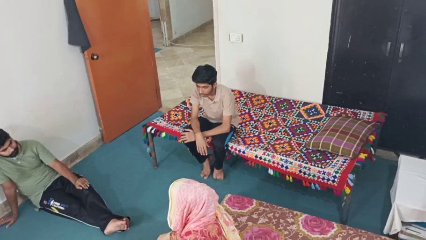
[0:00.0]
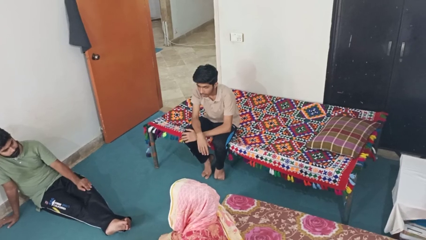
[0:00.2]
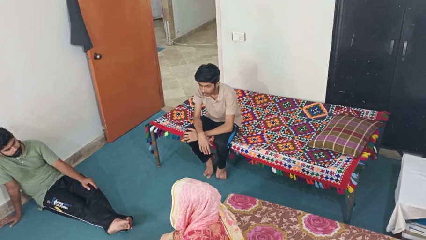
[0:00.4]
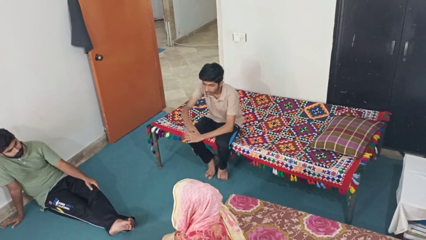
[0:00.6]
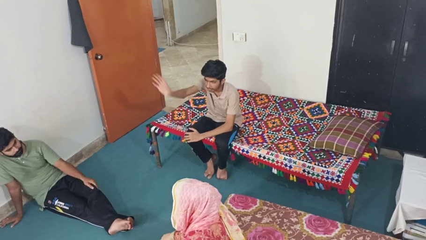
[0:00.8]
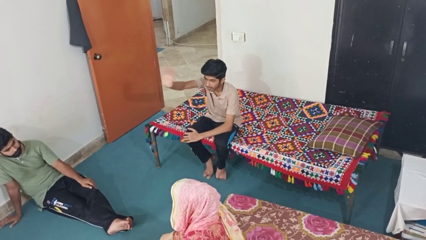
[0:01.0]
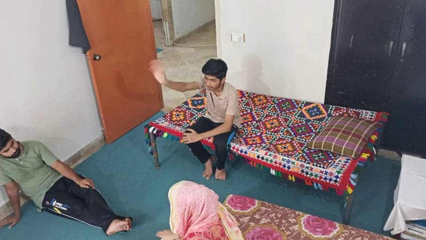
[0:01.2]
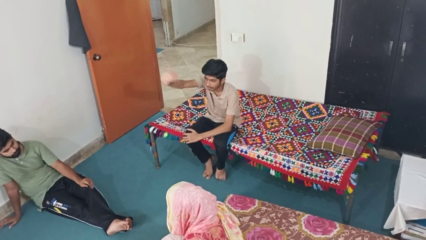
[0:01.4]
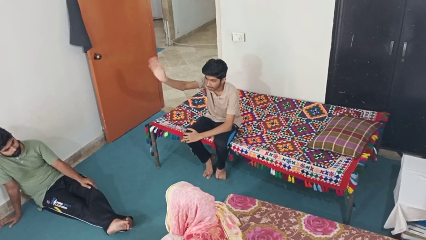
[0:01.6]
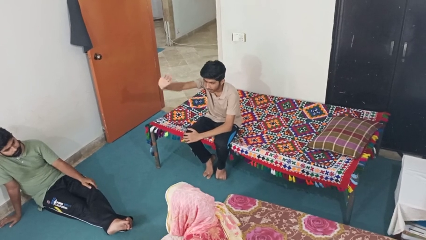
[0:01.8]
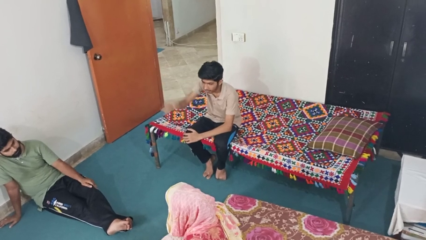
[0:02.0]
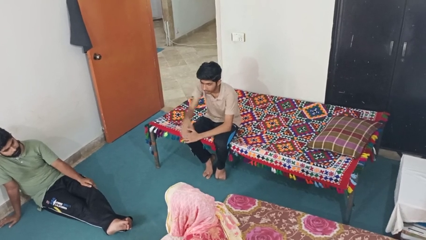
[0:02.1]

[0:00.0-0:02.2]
person waves at person

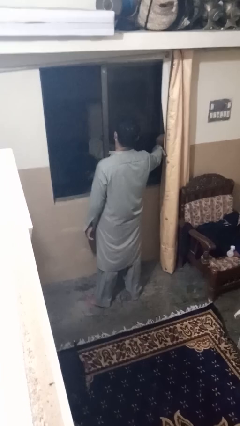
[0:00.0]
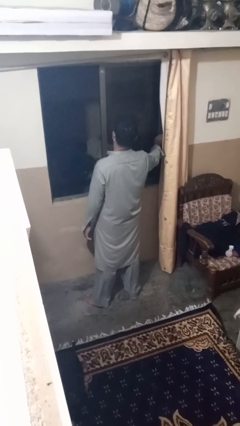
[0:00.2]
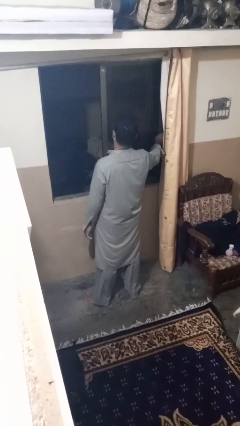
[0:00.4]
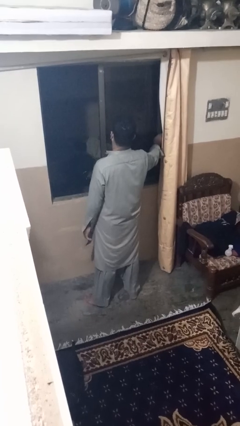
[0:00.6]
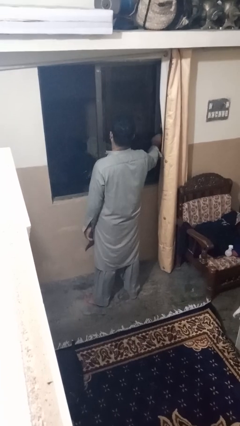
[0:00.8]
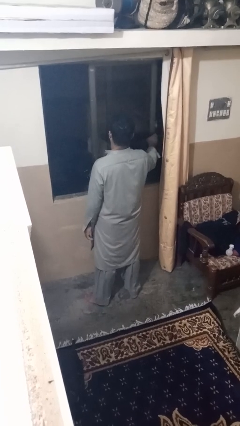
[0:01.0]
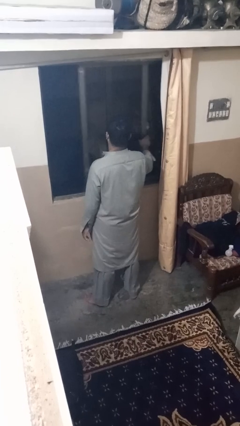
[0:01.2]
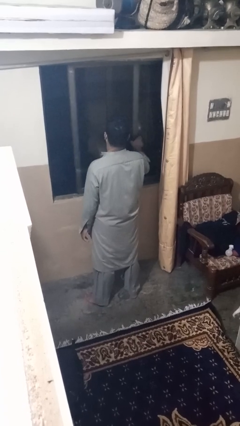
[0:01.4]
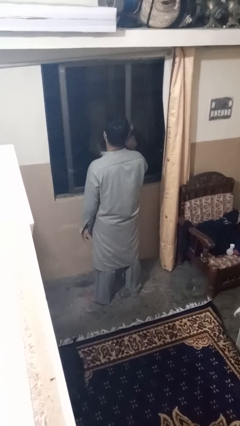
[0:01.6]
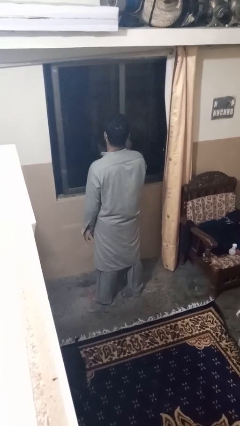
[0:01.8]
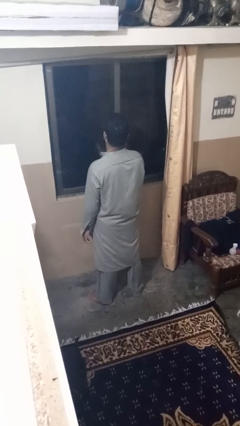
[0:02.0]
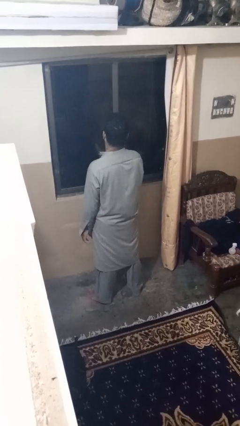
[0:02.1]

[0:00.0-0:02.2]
person closes home window

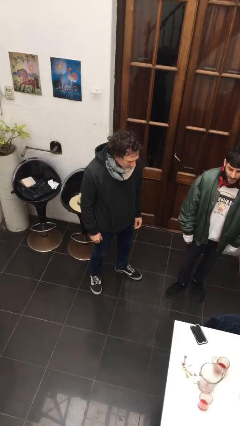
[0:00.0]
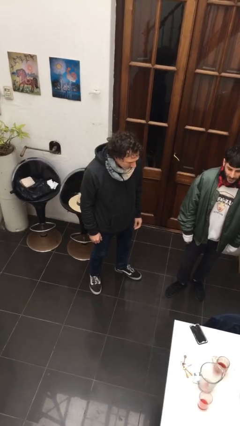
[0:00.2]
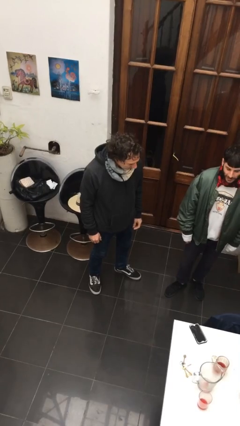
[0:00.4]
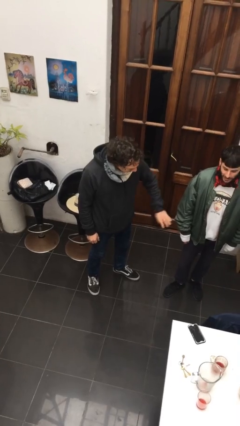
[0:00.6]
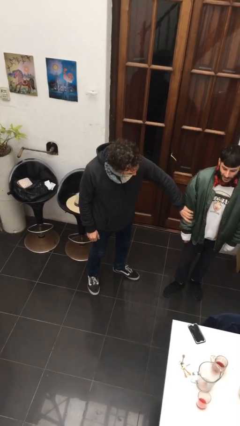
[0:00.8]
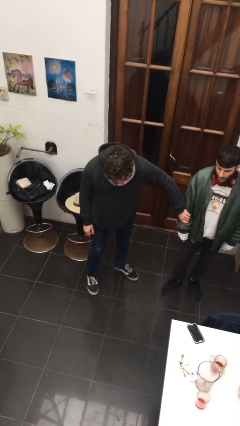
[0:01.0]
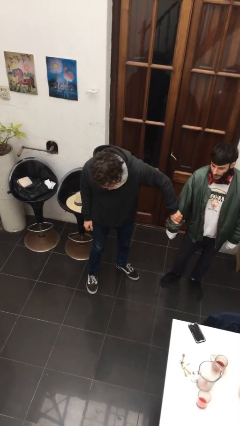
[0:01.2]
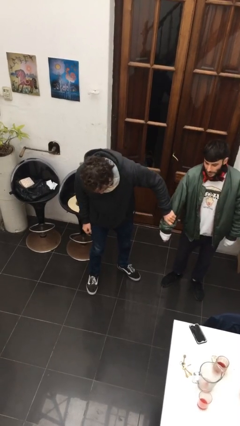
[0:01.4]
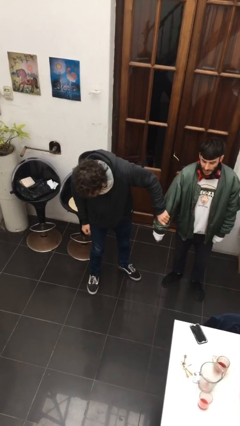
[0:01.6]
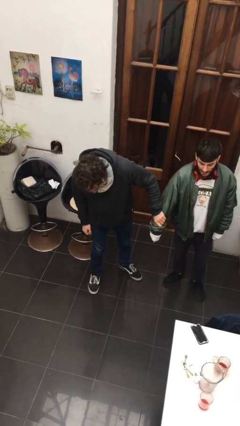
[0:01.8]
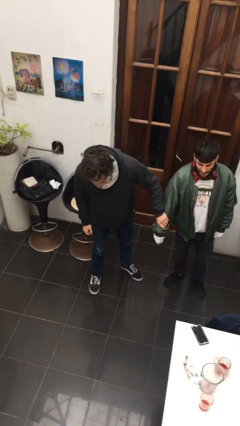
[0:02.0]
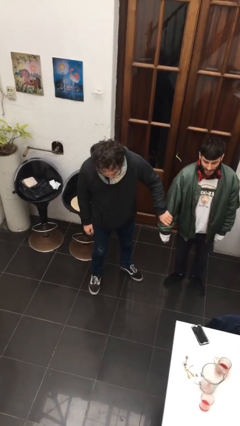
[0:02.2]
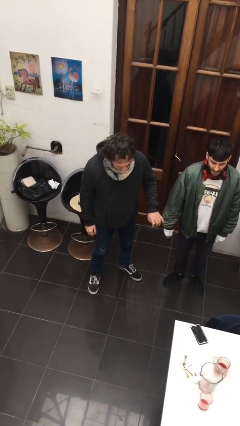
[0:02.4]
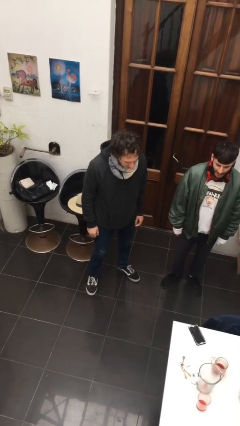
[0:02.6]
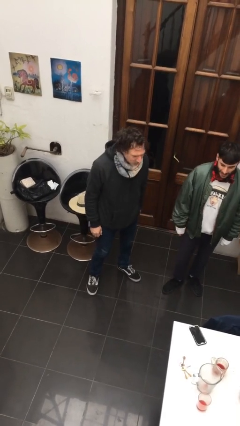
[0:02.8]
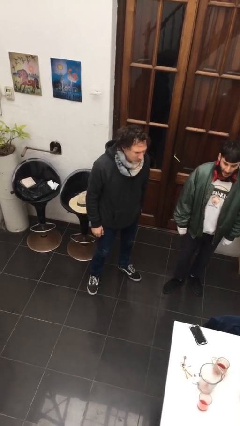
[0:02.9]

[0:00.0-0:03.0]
person grabs person by forearm

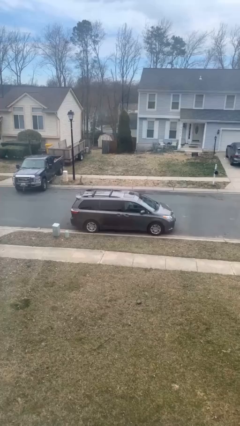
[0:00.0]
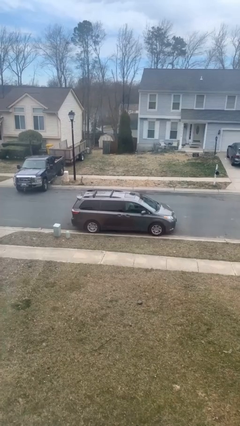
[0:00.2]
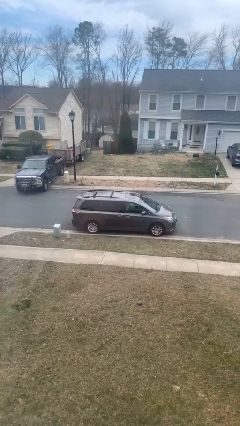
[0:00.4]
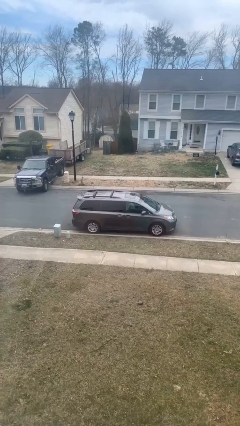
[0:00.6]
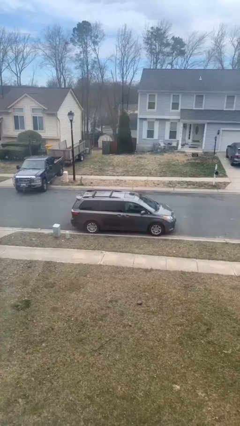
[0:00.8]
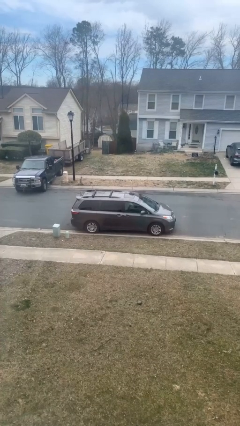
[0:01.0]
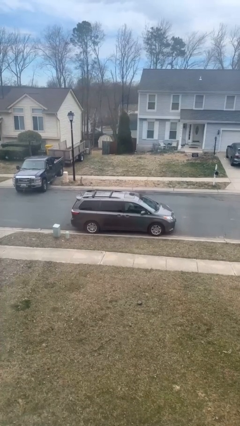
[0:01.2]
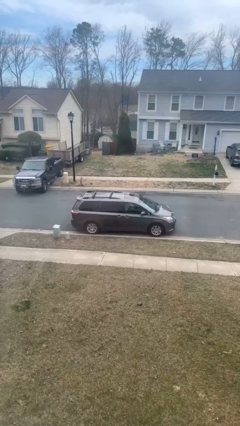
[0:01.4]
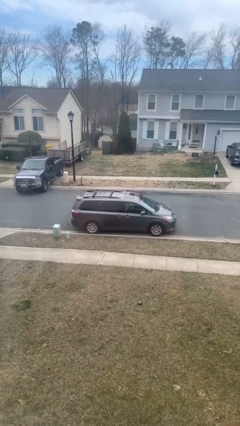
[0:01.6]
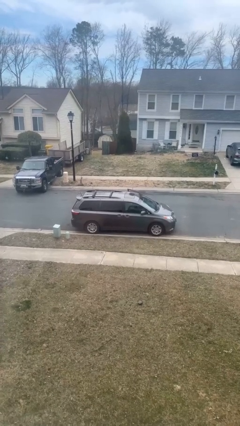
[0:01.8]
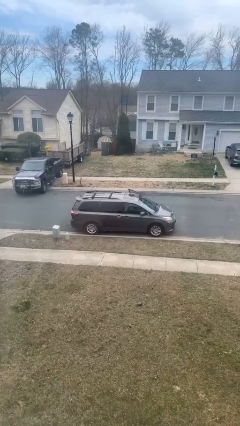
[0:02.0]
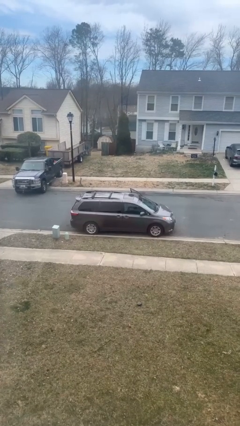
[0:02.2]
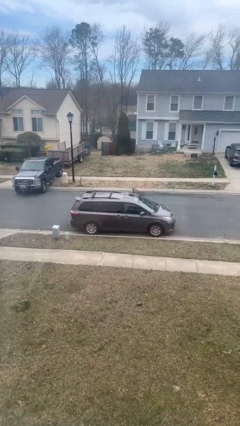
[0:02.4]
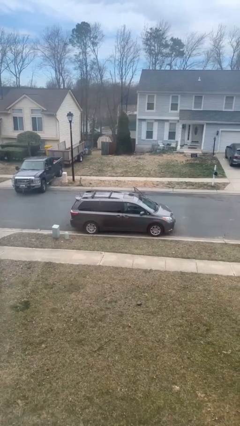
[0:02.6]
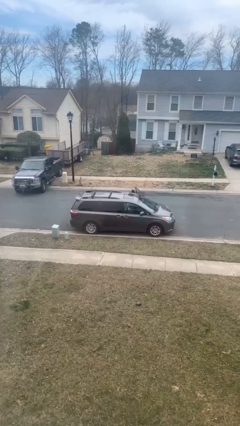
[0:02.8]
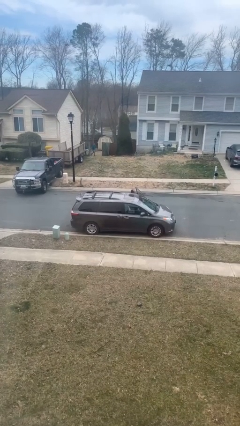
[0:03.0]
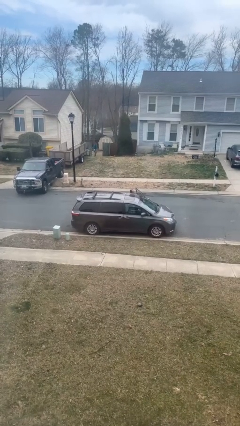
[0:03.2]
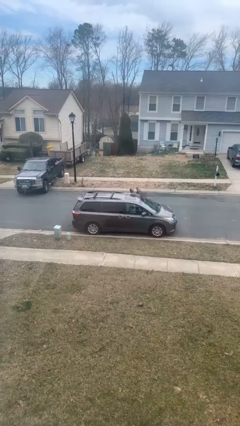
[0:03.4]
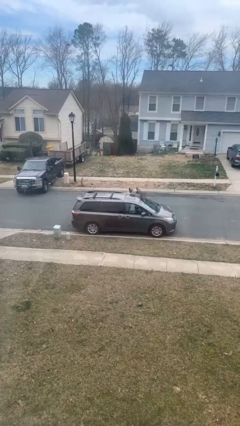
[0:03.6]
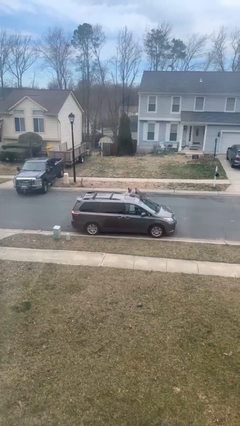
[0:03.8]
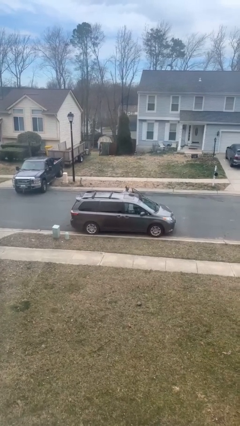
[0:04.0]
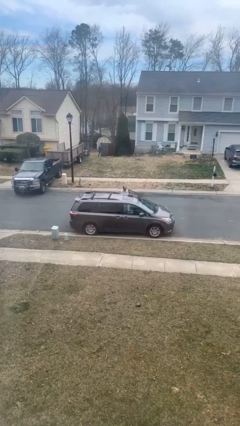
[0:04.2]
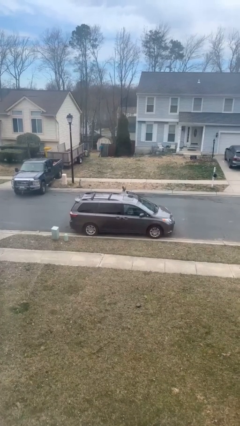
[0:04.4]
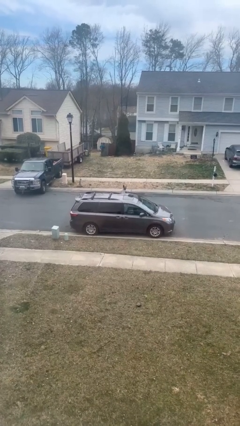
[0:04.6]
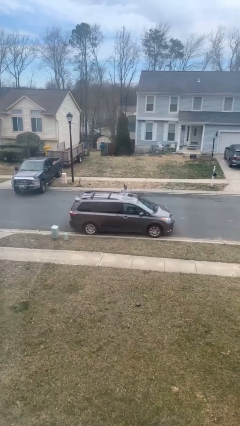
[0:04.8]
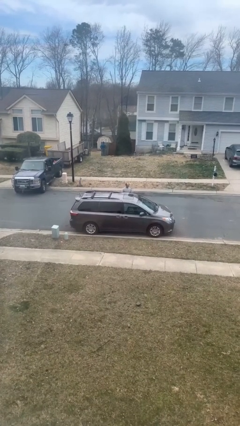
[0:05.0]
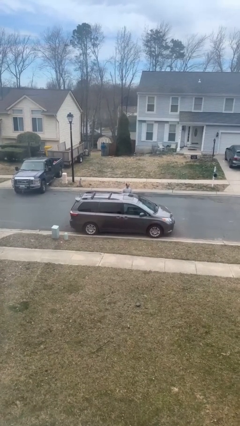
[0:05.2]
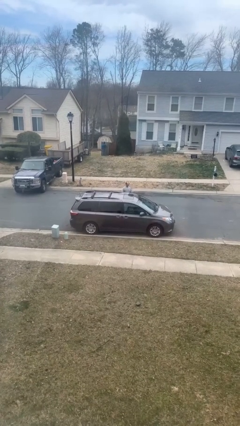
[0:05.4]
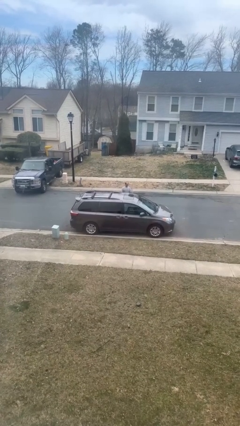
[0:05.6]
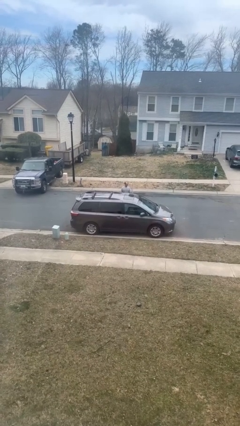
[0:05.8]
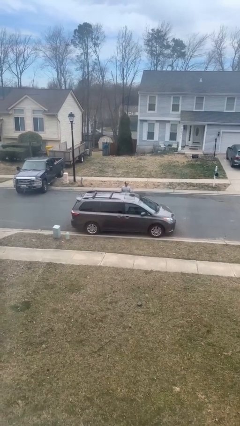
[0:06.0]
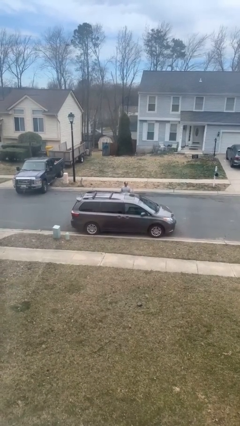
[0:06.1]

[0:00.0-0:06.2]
car drops off person

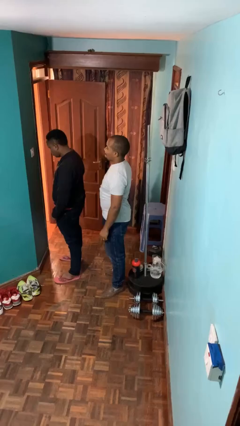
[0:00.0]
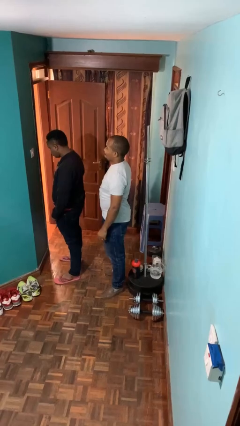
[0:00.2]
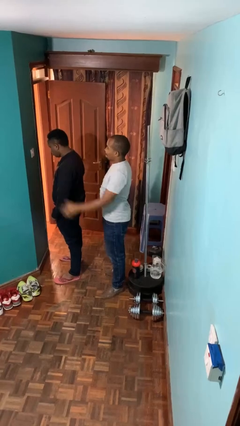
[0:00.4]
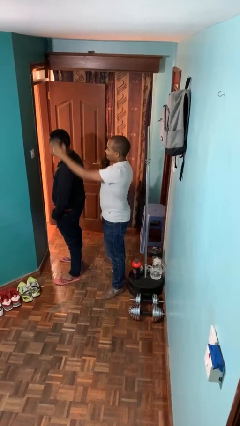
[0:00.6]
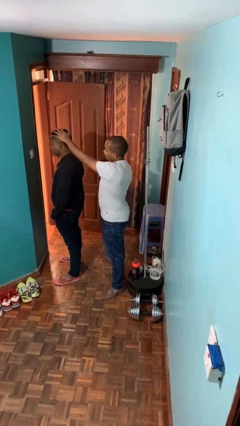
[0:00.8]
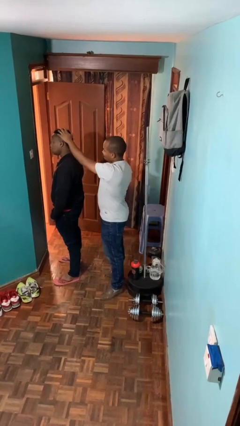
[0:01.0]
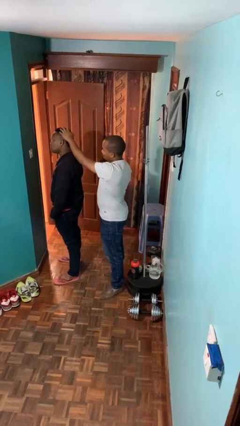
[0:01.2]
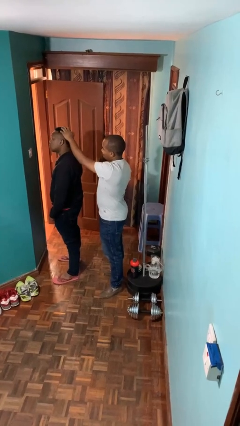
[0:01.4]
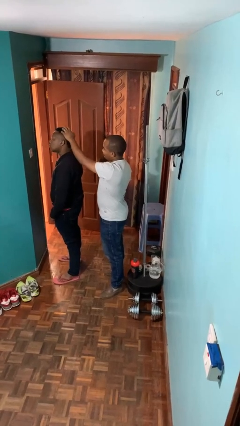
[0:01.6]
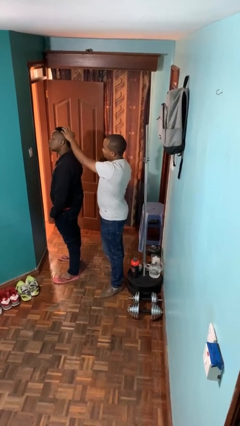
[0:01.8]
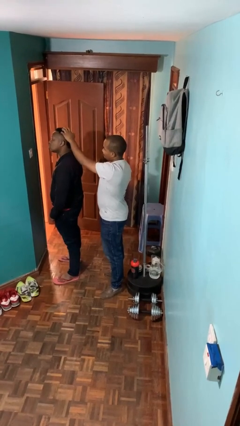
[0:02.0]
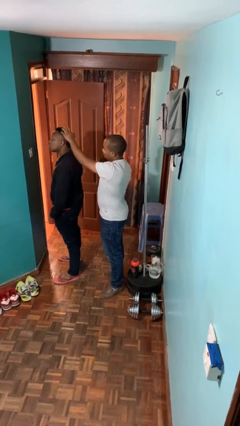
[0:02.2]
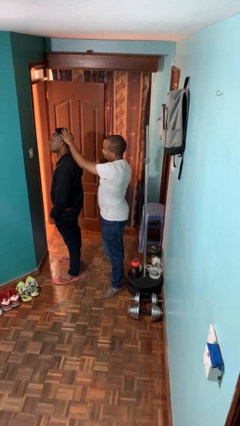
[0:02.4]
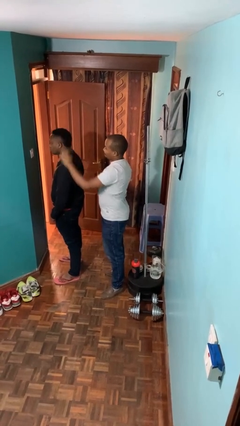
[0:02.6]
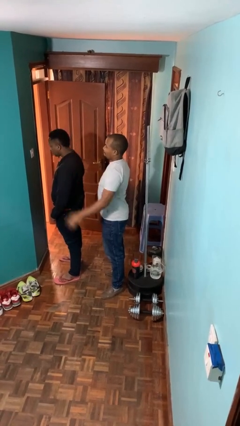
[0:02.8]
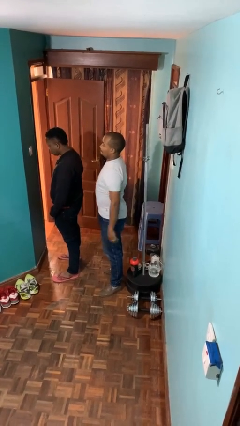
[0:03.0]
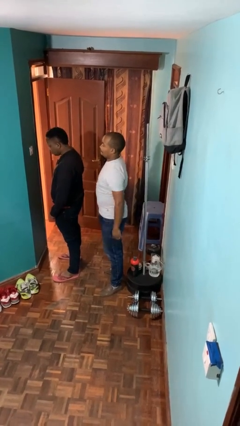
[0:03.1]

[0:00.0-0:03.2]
person grabs person by hair

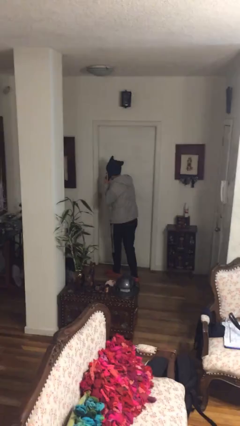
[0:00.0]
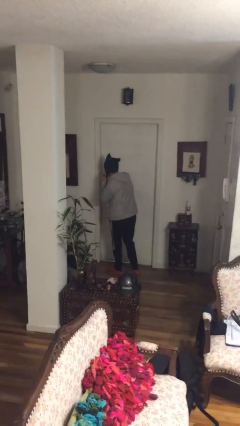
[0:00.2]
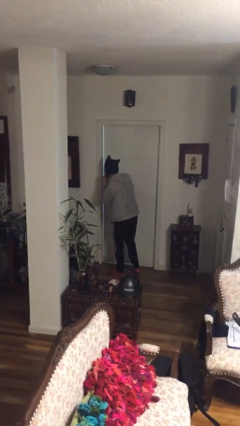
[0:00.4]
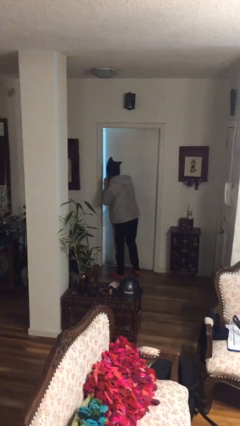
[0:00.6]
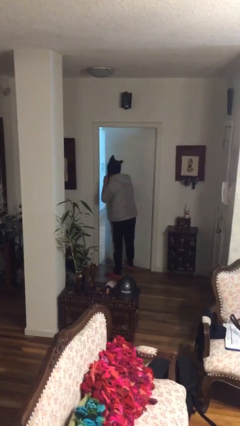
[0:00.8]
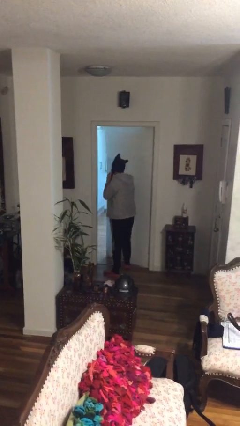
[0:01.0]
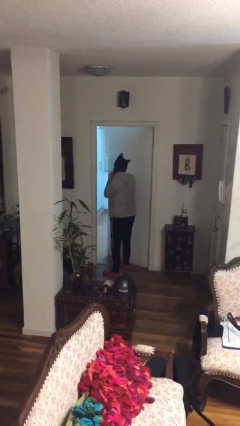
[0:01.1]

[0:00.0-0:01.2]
person opens facility door
